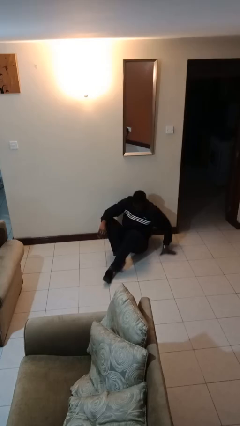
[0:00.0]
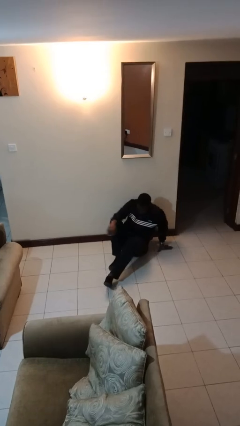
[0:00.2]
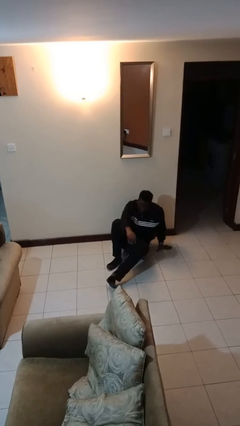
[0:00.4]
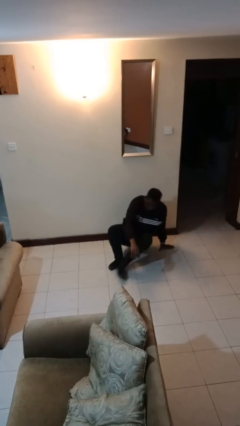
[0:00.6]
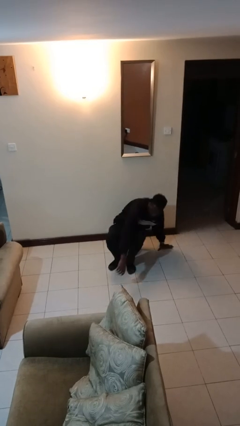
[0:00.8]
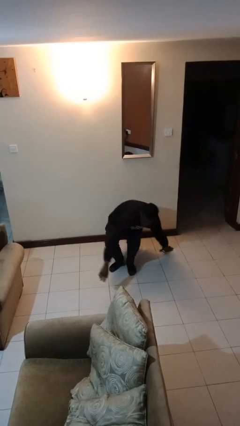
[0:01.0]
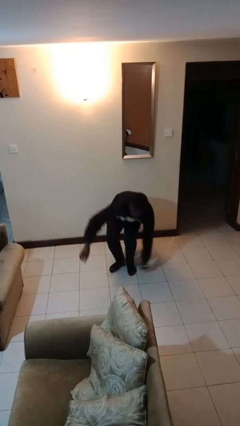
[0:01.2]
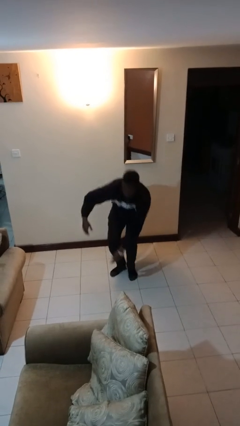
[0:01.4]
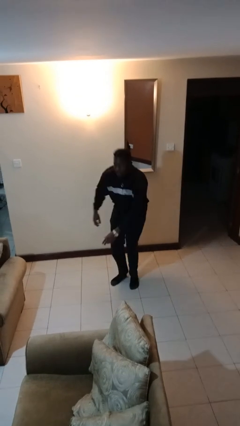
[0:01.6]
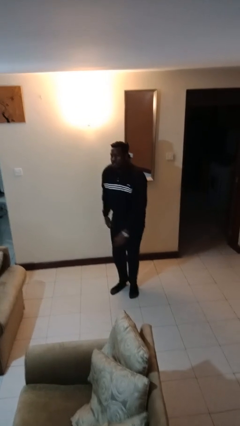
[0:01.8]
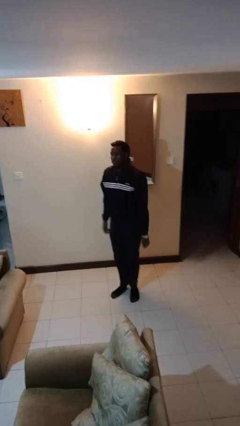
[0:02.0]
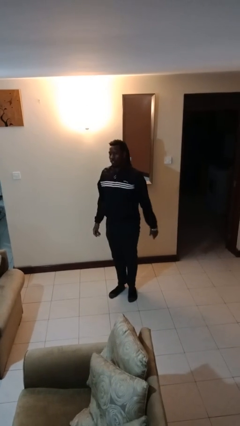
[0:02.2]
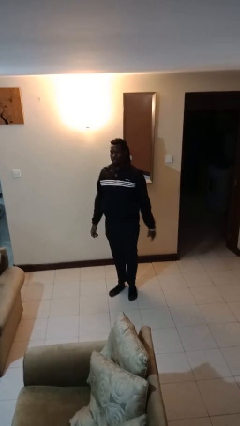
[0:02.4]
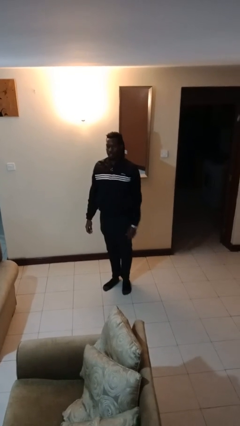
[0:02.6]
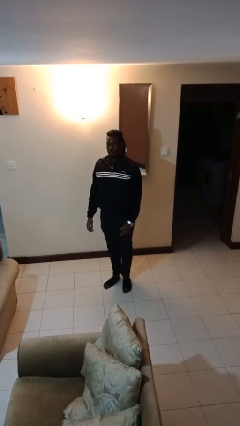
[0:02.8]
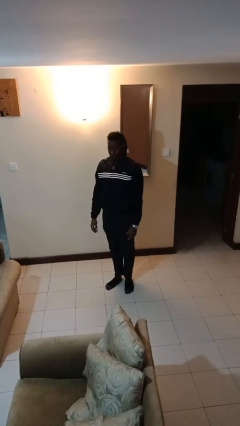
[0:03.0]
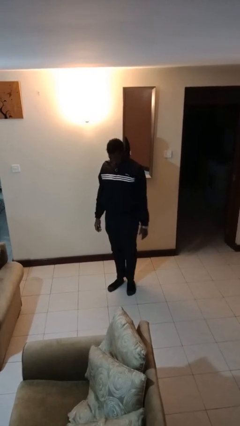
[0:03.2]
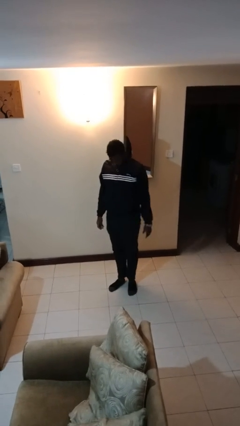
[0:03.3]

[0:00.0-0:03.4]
person stands up from floor

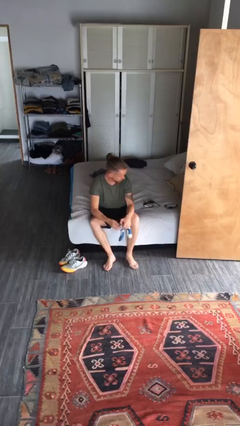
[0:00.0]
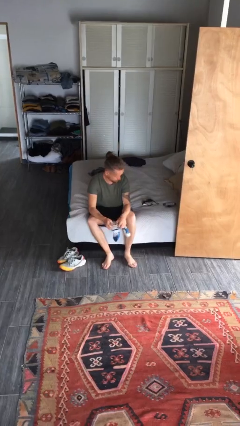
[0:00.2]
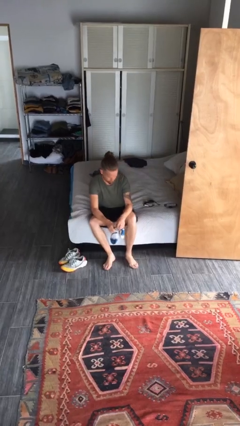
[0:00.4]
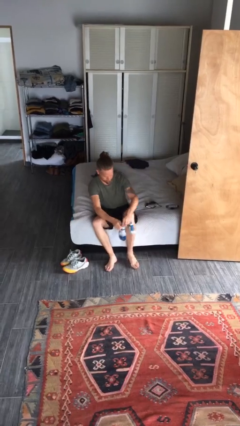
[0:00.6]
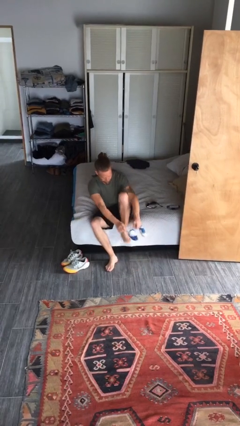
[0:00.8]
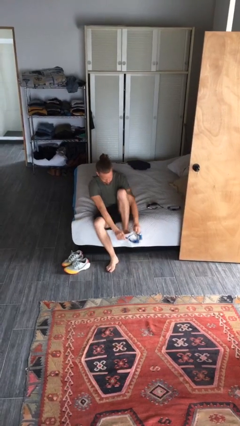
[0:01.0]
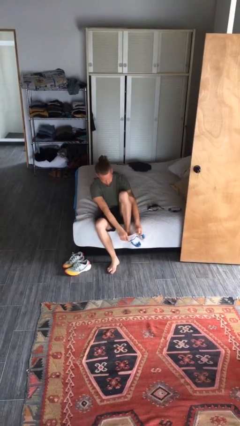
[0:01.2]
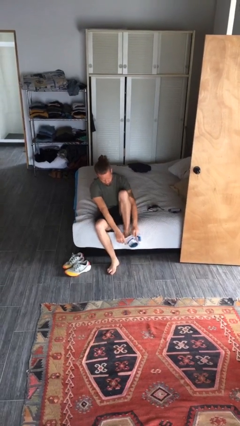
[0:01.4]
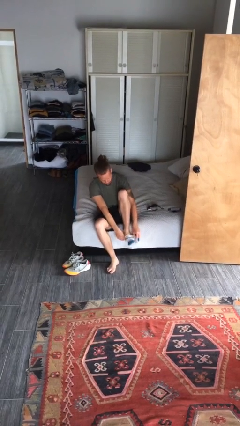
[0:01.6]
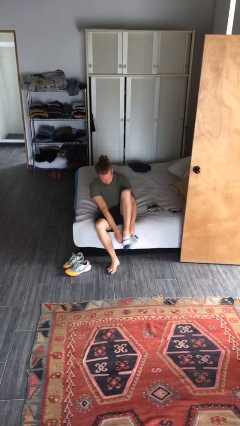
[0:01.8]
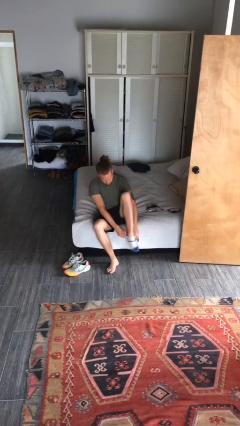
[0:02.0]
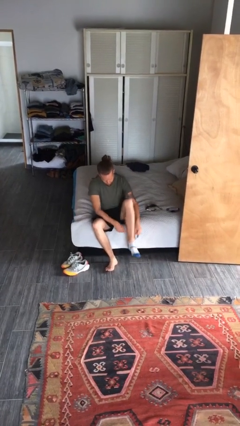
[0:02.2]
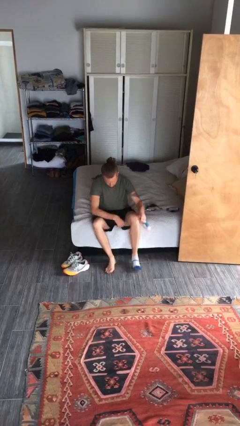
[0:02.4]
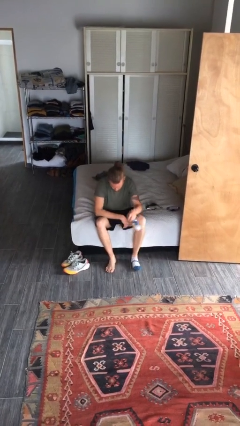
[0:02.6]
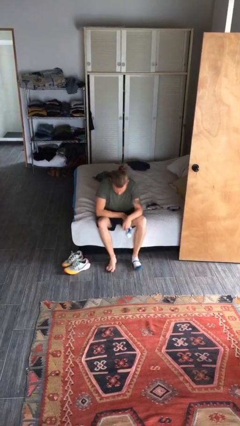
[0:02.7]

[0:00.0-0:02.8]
person puts on socks

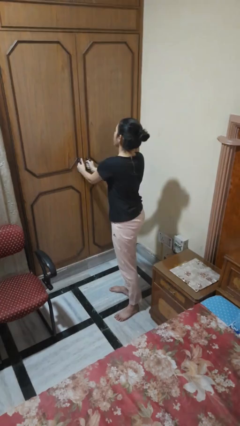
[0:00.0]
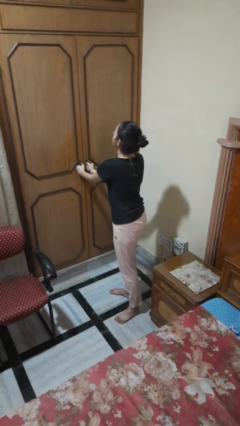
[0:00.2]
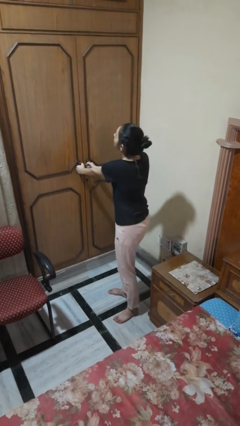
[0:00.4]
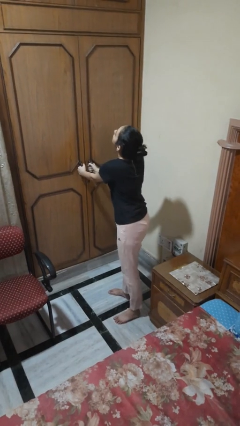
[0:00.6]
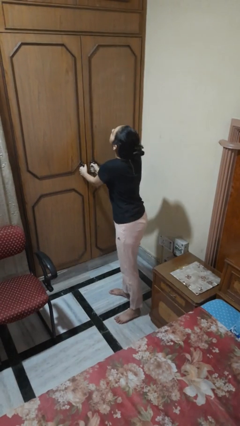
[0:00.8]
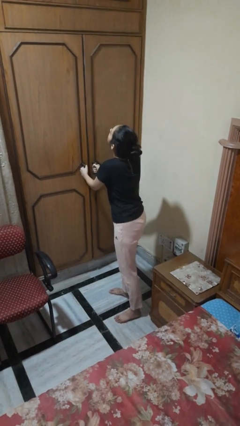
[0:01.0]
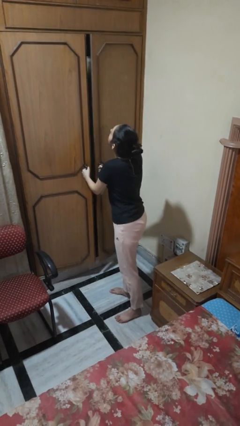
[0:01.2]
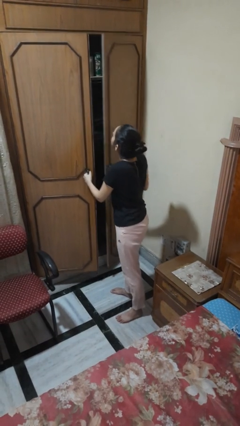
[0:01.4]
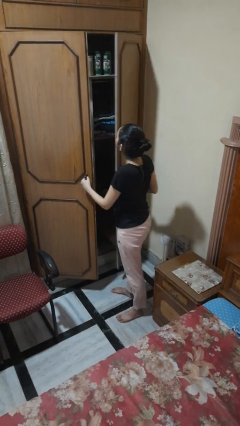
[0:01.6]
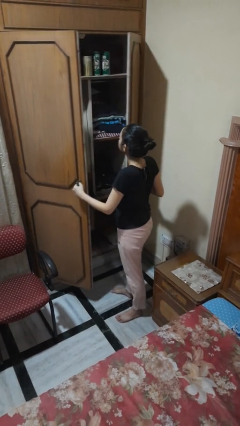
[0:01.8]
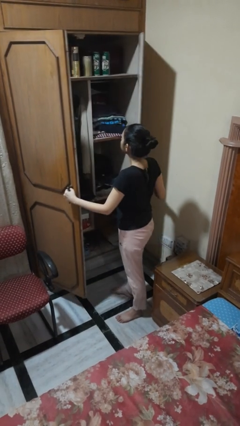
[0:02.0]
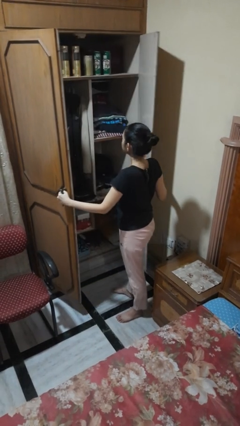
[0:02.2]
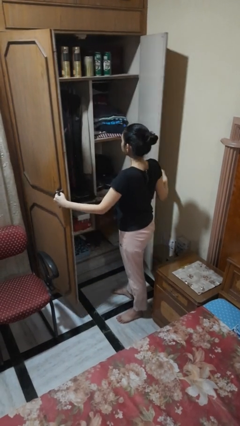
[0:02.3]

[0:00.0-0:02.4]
person opens closet door

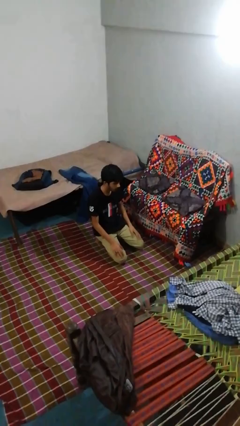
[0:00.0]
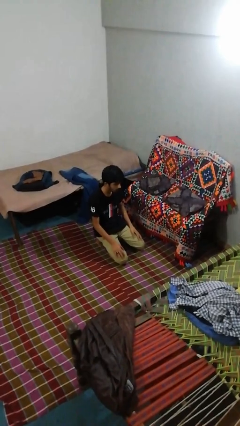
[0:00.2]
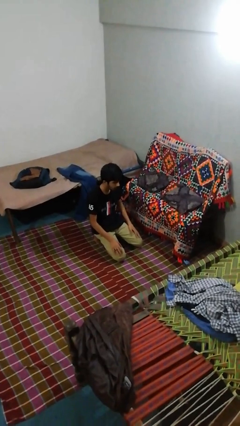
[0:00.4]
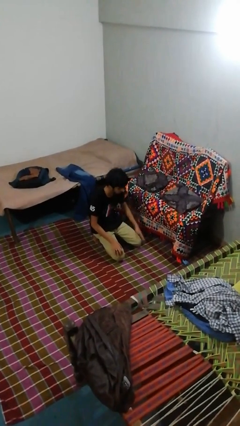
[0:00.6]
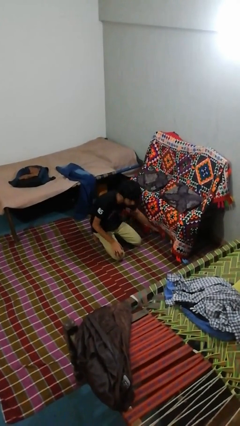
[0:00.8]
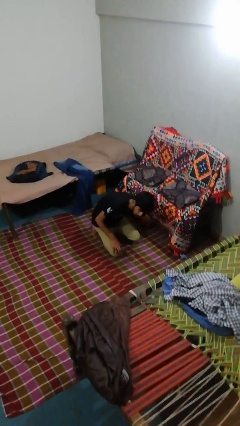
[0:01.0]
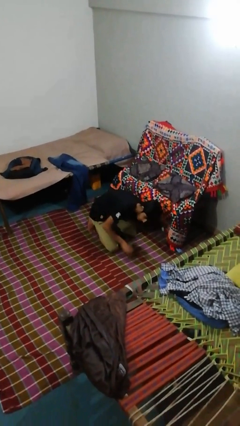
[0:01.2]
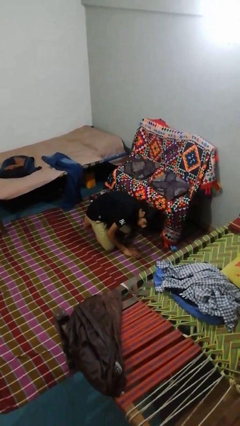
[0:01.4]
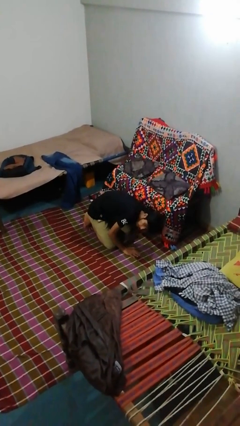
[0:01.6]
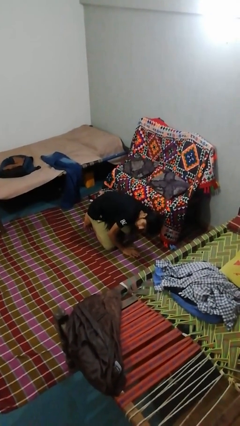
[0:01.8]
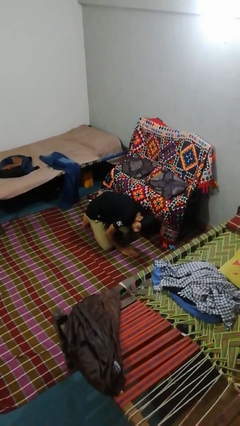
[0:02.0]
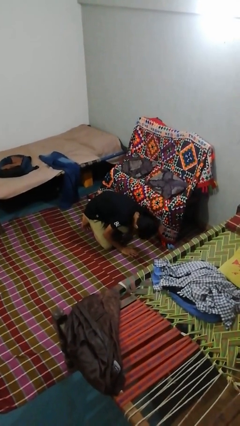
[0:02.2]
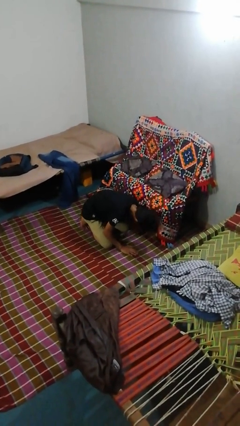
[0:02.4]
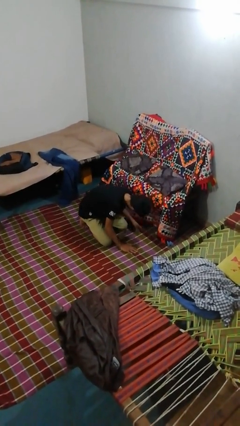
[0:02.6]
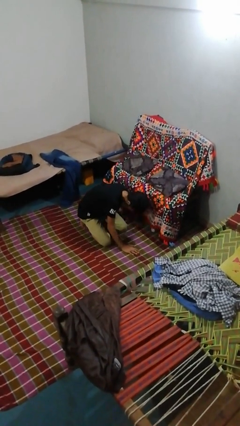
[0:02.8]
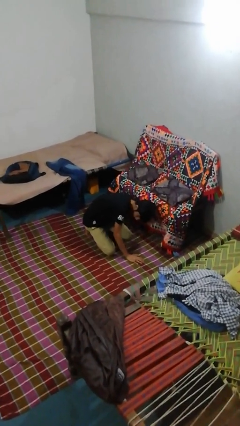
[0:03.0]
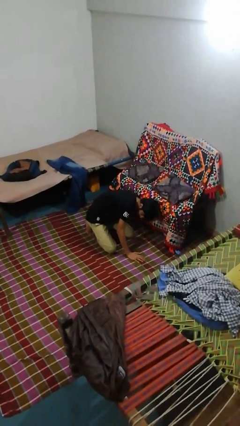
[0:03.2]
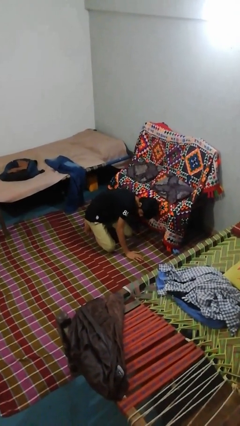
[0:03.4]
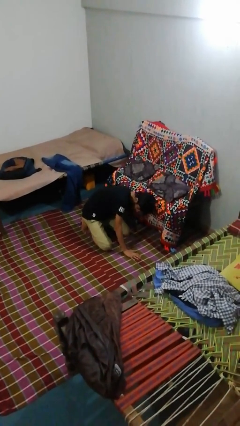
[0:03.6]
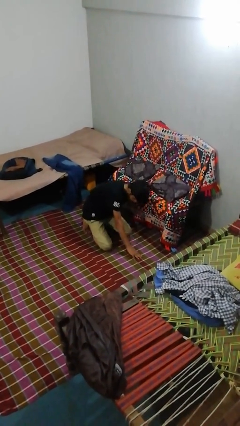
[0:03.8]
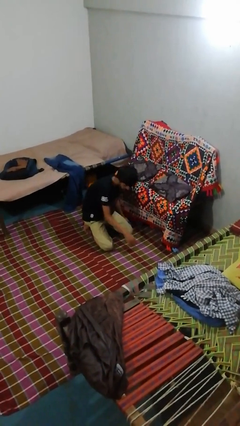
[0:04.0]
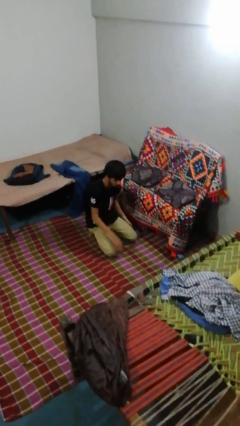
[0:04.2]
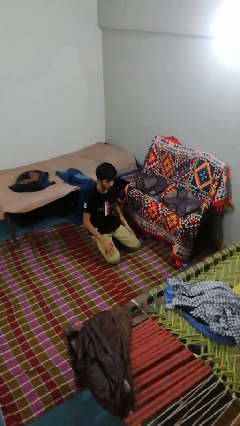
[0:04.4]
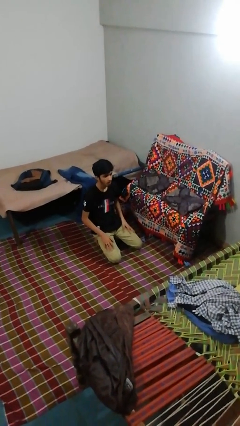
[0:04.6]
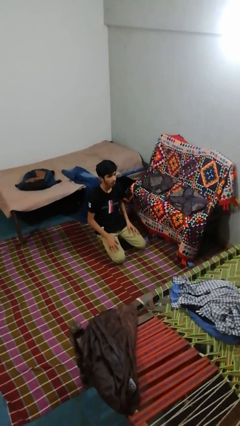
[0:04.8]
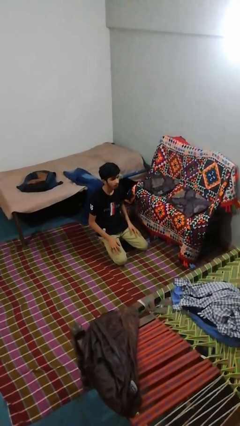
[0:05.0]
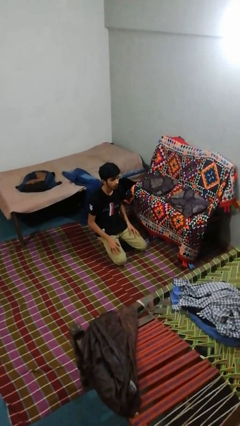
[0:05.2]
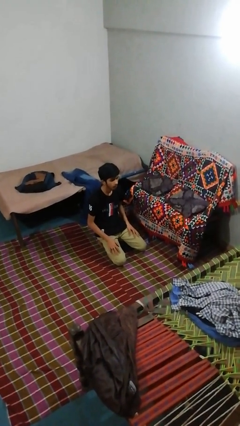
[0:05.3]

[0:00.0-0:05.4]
person searches under couch

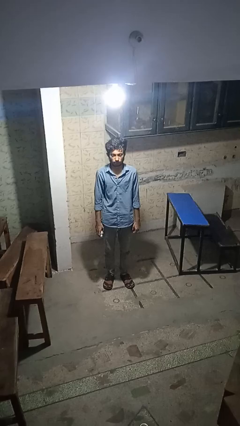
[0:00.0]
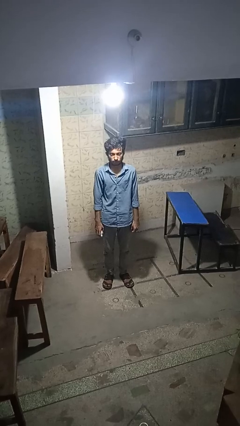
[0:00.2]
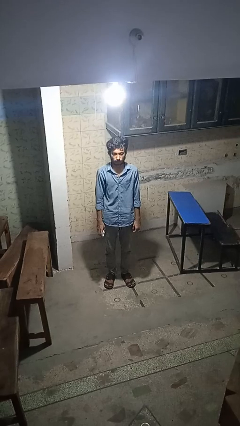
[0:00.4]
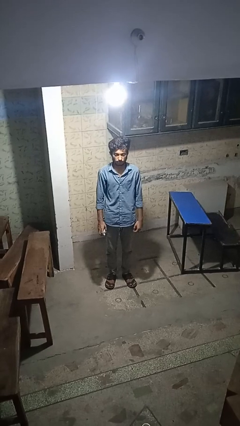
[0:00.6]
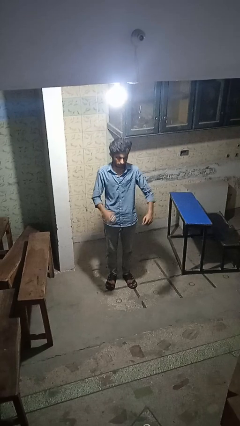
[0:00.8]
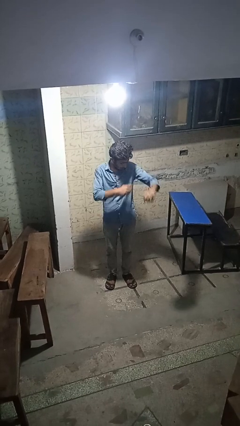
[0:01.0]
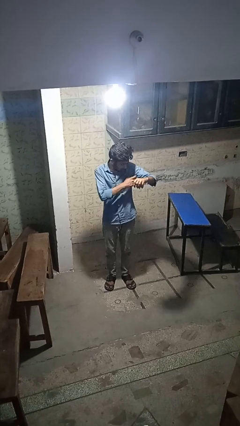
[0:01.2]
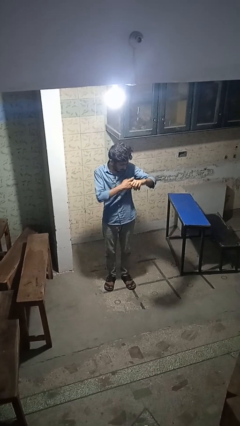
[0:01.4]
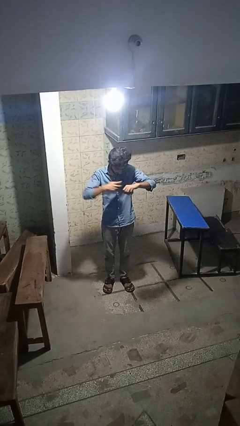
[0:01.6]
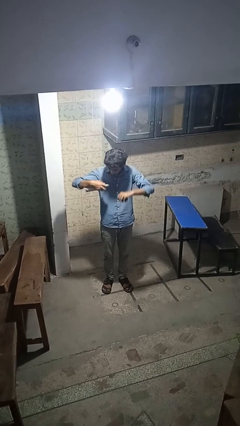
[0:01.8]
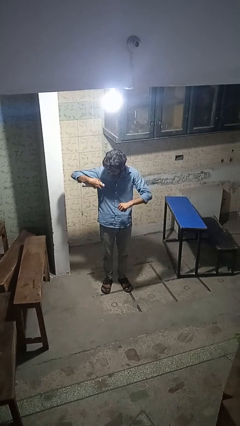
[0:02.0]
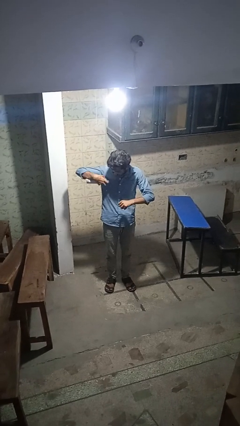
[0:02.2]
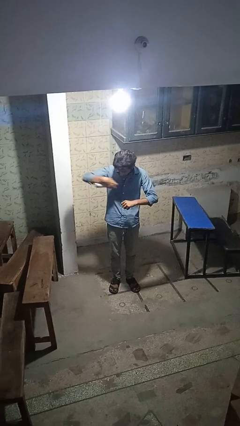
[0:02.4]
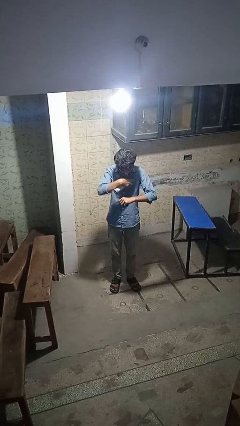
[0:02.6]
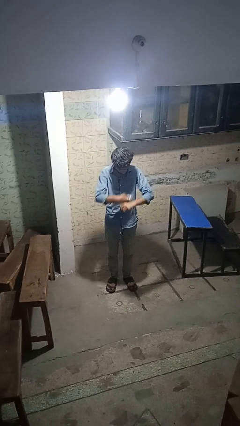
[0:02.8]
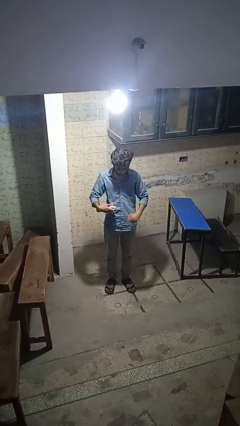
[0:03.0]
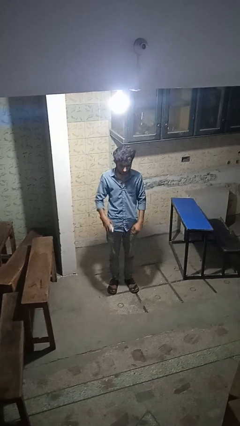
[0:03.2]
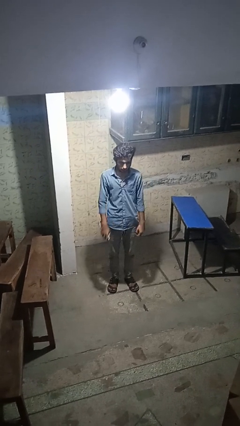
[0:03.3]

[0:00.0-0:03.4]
person applies deodorant

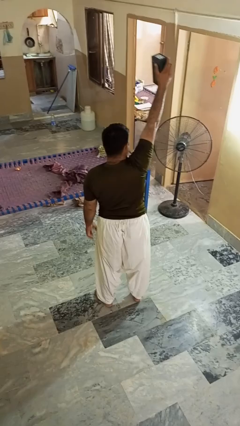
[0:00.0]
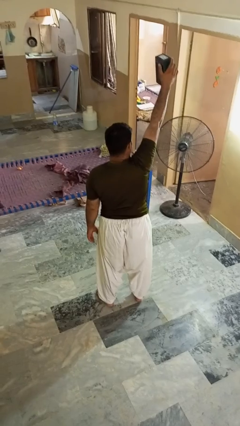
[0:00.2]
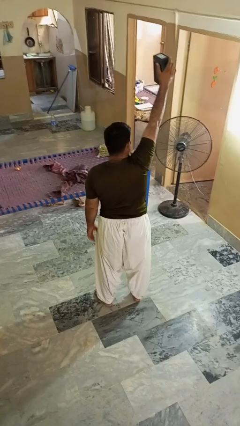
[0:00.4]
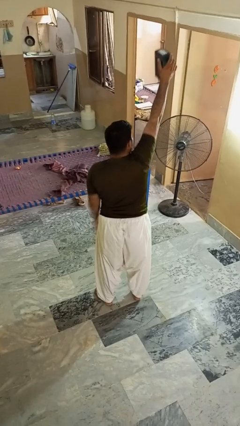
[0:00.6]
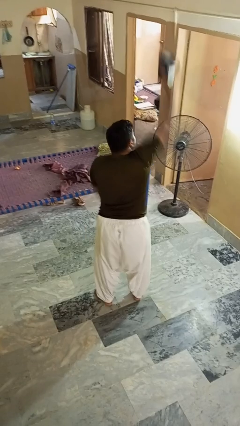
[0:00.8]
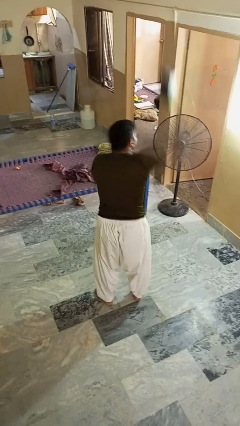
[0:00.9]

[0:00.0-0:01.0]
person drops object
